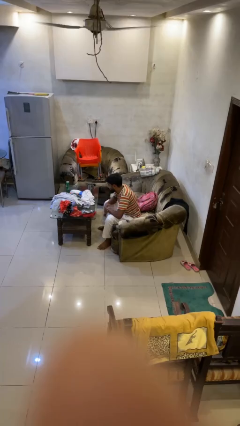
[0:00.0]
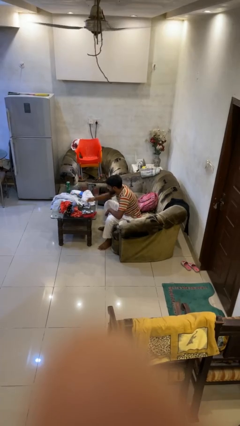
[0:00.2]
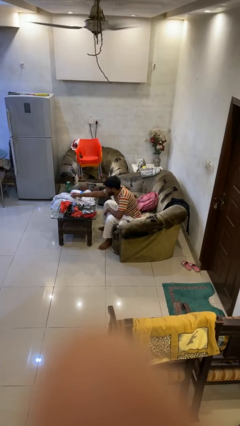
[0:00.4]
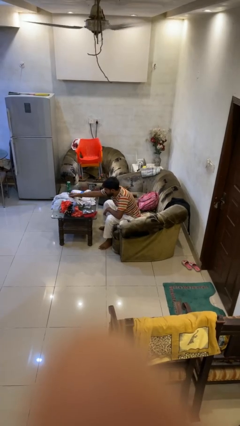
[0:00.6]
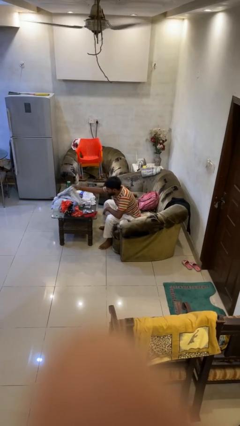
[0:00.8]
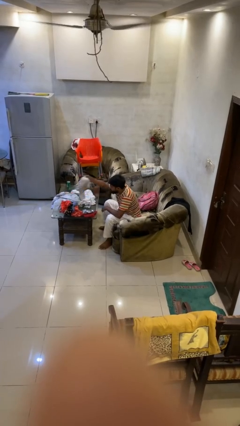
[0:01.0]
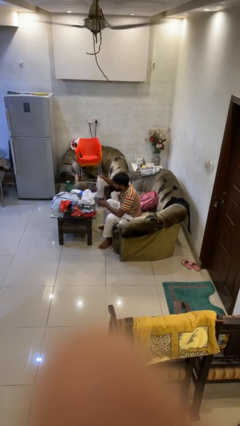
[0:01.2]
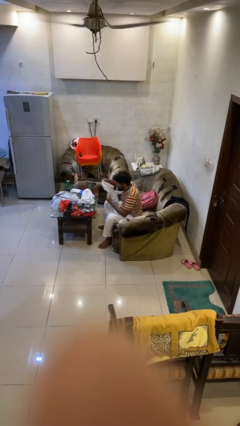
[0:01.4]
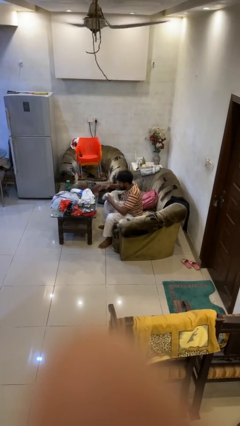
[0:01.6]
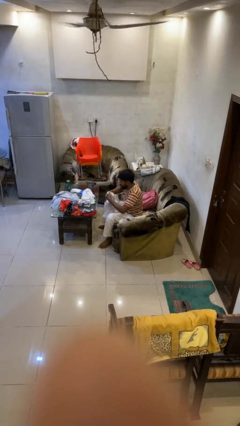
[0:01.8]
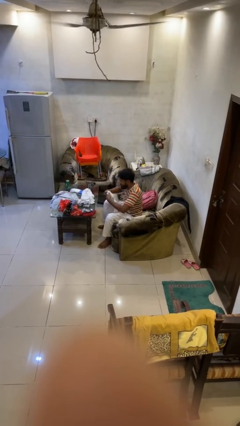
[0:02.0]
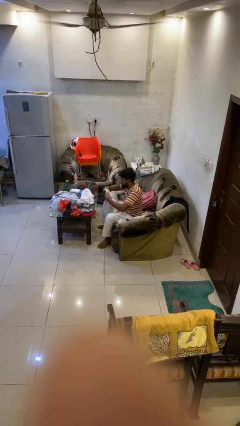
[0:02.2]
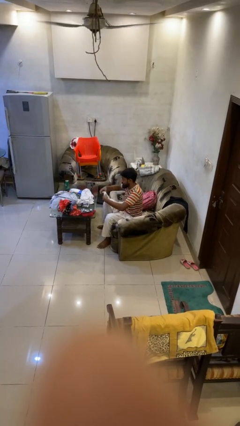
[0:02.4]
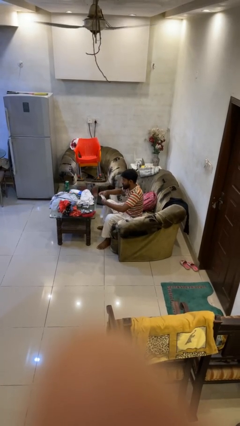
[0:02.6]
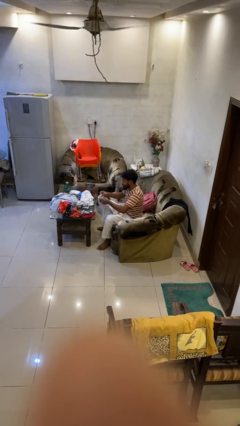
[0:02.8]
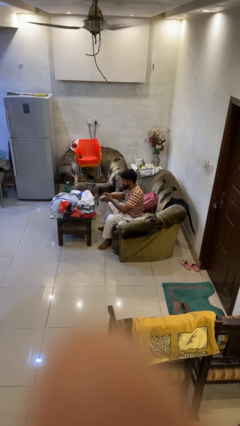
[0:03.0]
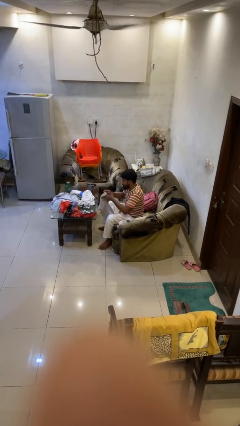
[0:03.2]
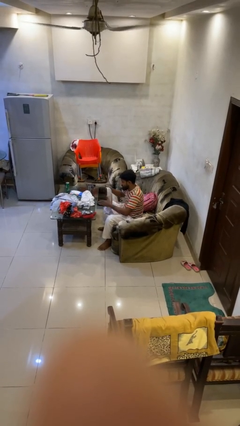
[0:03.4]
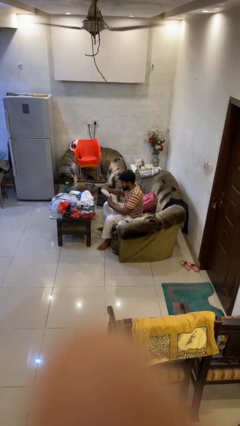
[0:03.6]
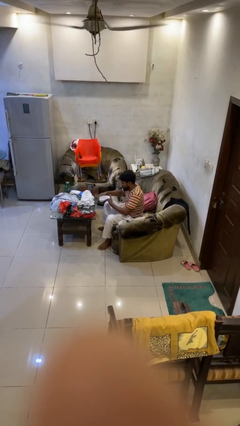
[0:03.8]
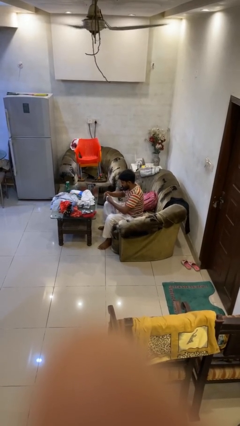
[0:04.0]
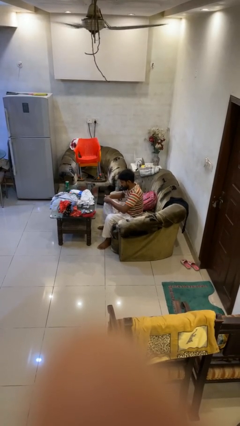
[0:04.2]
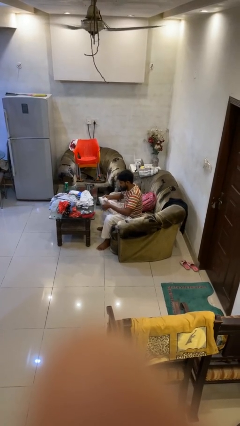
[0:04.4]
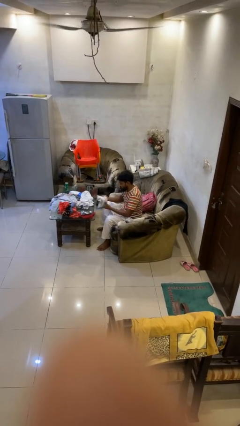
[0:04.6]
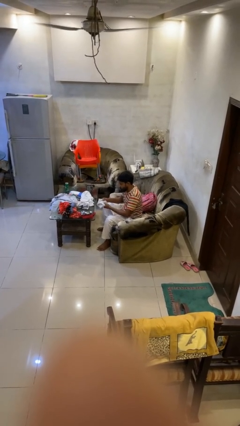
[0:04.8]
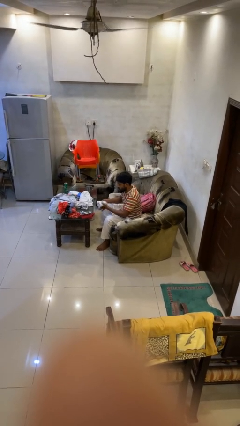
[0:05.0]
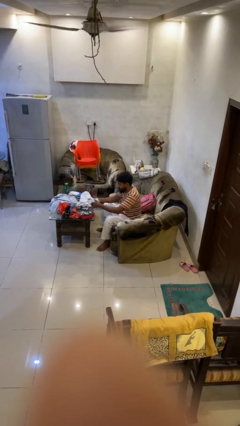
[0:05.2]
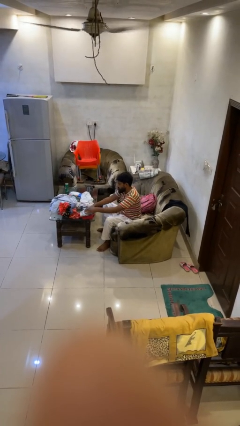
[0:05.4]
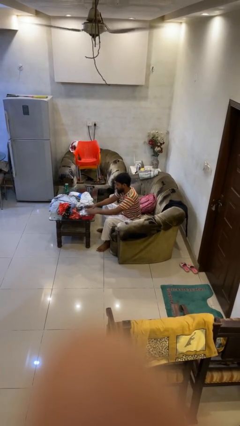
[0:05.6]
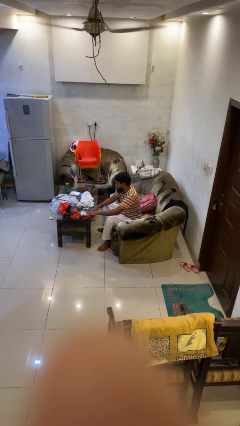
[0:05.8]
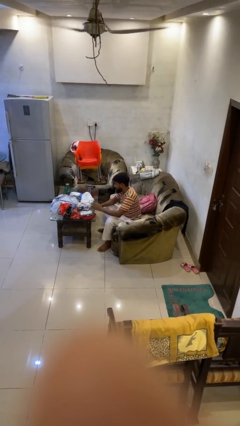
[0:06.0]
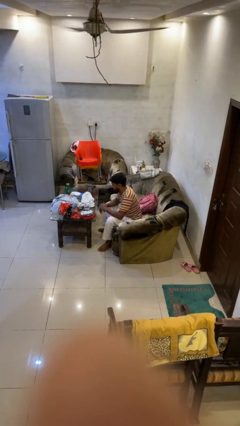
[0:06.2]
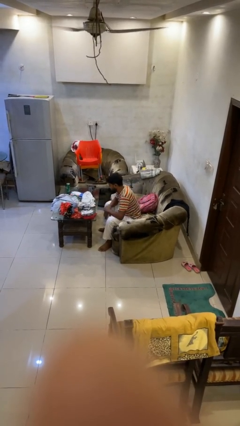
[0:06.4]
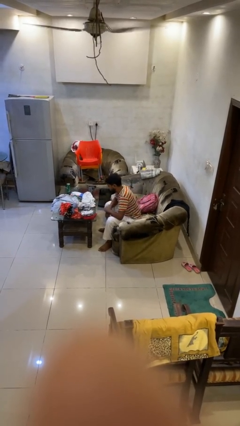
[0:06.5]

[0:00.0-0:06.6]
person folds pants

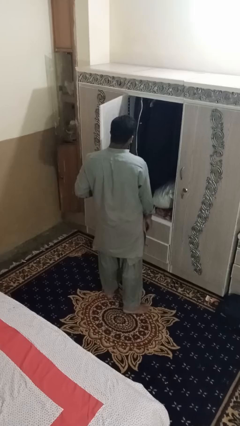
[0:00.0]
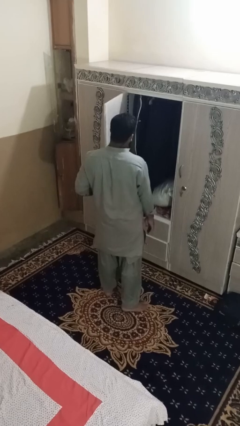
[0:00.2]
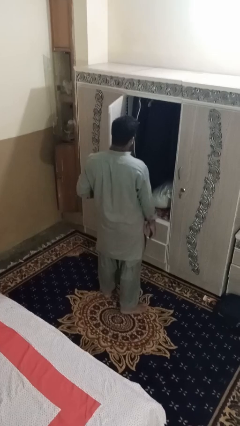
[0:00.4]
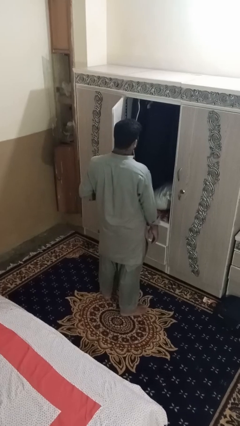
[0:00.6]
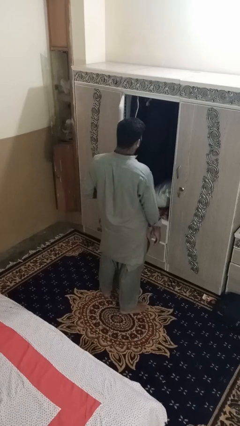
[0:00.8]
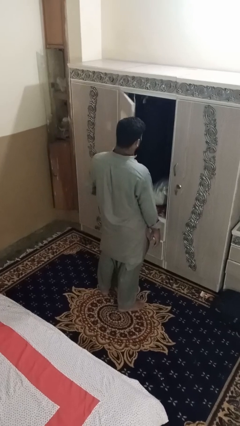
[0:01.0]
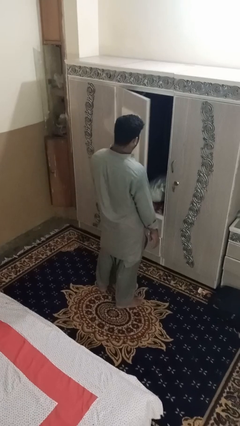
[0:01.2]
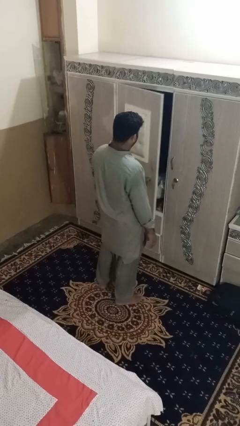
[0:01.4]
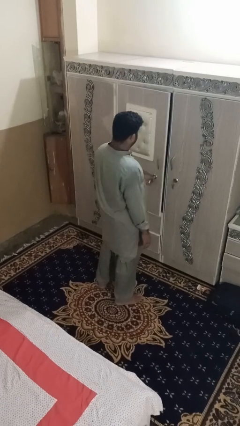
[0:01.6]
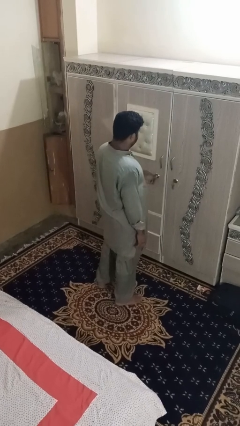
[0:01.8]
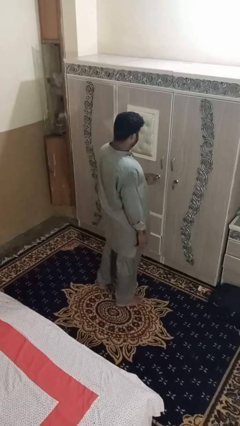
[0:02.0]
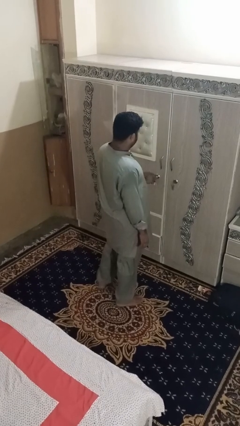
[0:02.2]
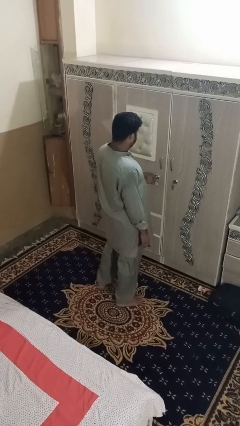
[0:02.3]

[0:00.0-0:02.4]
person closes dresser drawer

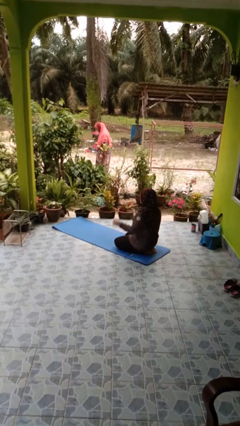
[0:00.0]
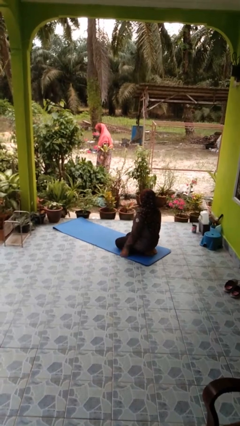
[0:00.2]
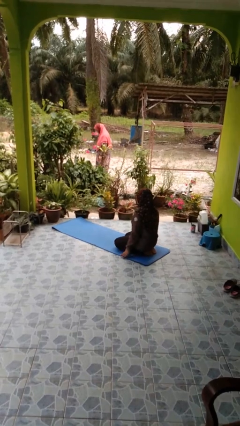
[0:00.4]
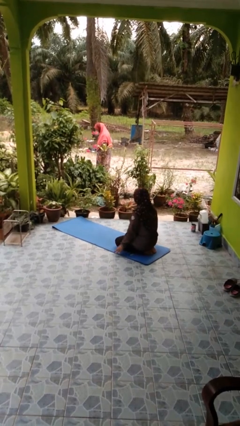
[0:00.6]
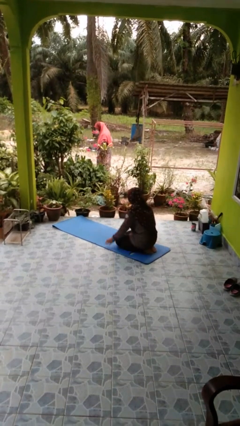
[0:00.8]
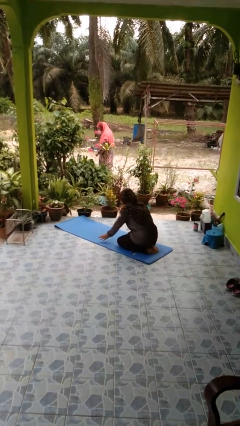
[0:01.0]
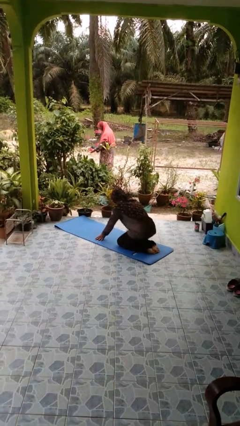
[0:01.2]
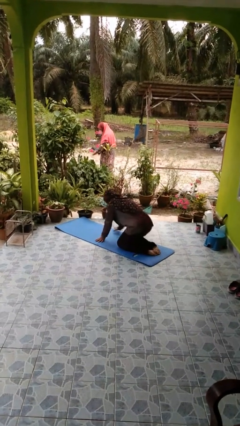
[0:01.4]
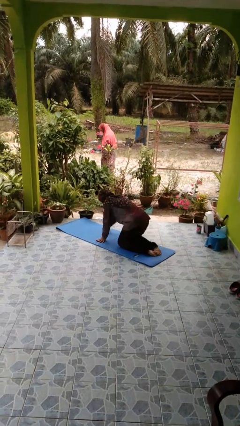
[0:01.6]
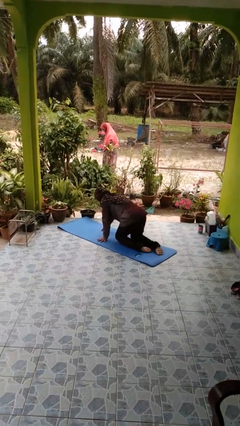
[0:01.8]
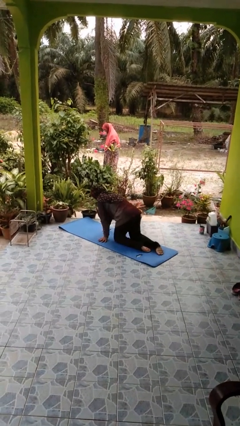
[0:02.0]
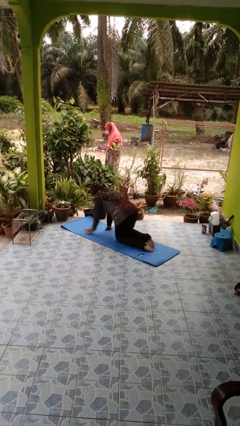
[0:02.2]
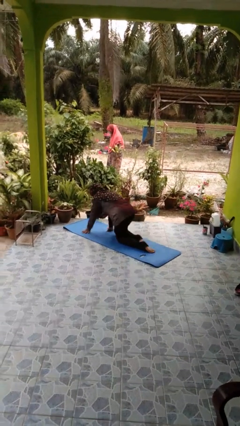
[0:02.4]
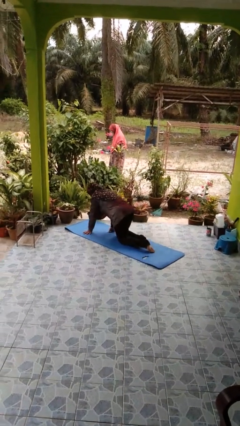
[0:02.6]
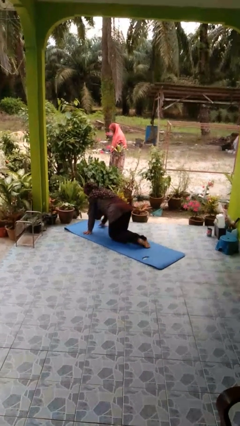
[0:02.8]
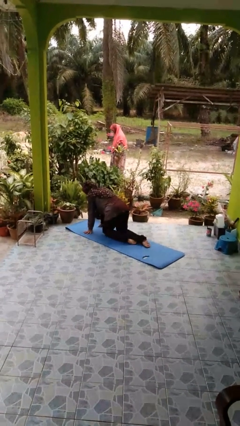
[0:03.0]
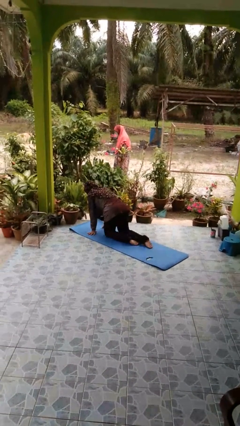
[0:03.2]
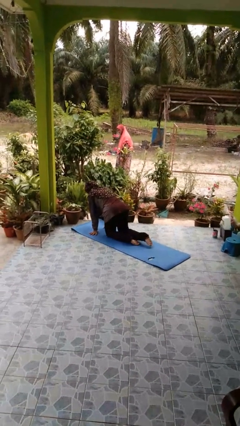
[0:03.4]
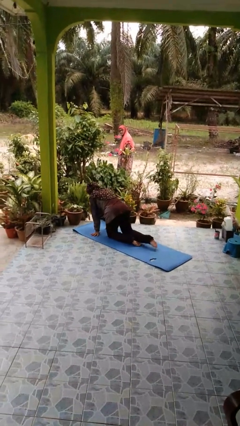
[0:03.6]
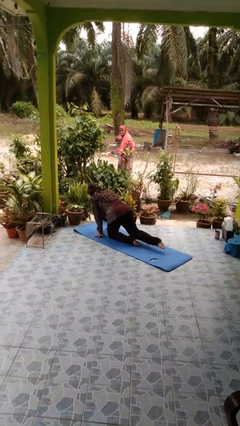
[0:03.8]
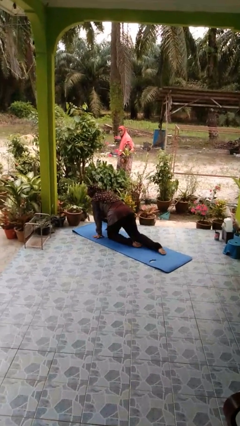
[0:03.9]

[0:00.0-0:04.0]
person crawls

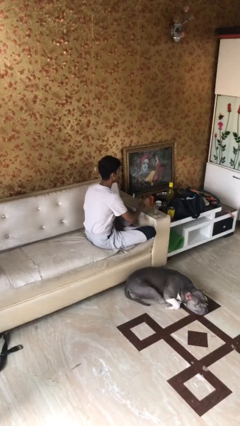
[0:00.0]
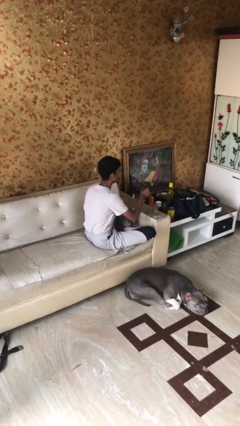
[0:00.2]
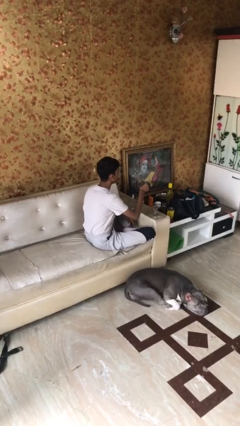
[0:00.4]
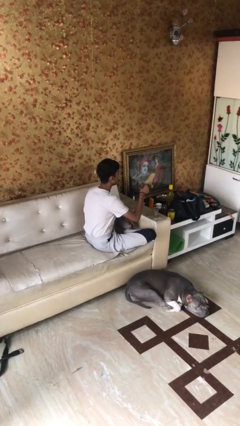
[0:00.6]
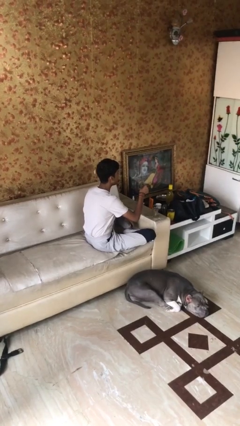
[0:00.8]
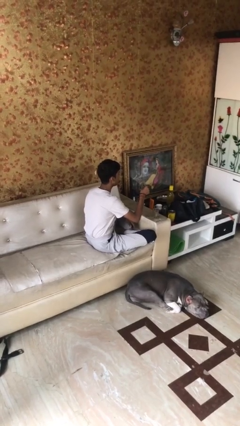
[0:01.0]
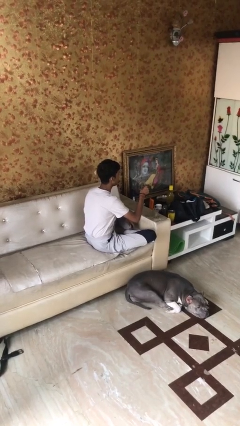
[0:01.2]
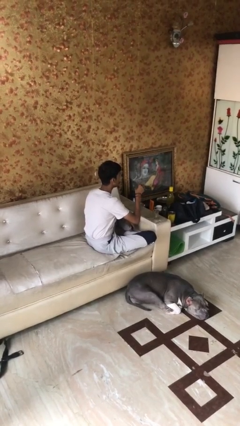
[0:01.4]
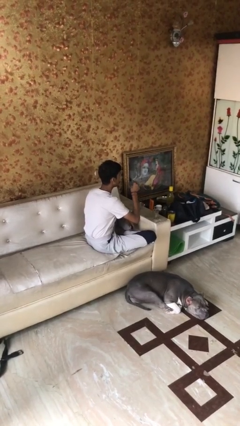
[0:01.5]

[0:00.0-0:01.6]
person picks up object from table

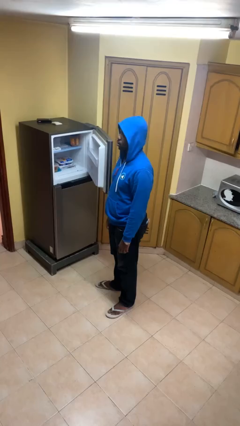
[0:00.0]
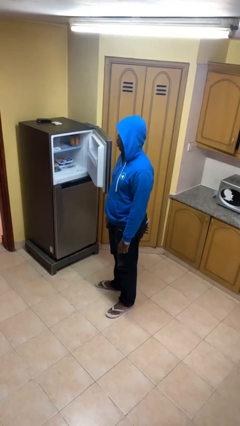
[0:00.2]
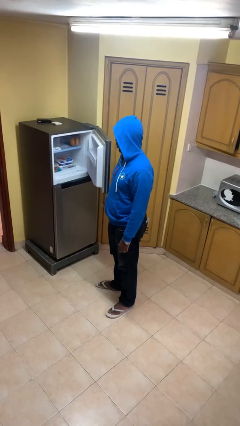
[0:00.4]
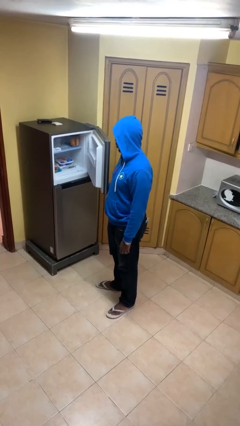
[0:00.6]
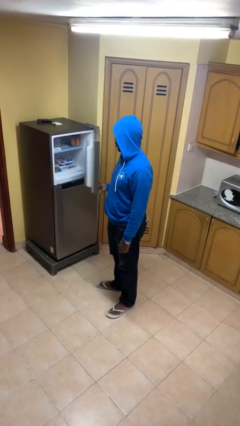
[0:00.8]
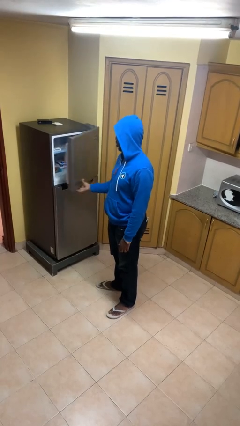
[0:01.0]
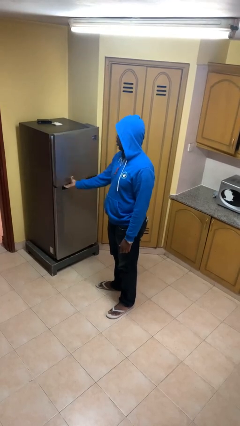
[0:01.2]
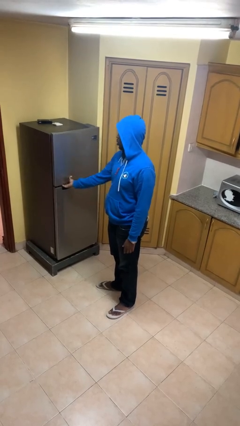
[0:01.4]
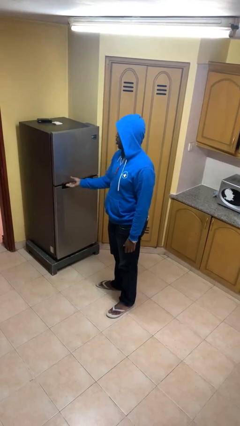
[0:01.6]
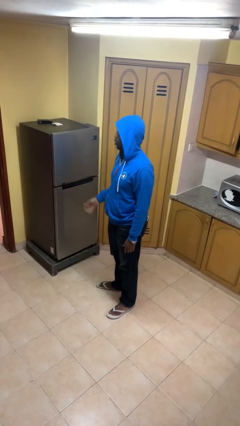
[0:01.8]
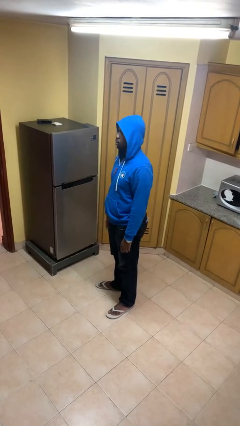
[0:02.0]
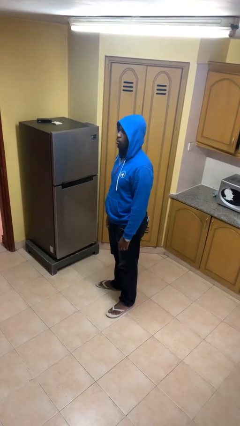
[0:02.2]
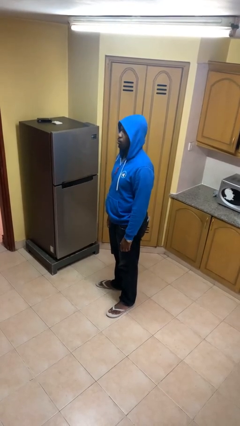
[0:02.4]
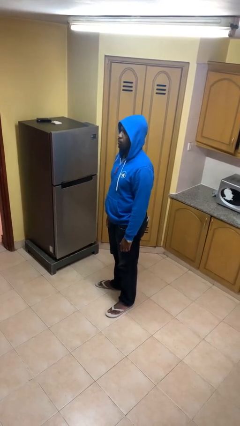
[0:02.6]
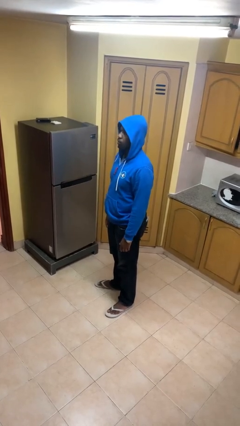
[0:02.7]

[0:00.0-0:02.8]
person closes refrigerator
